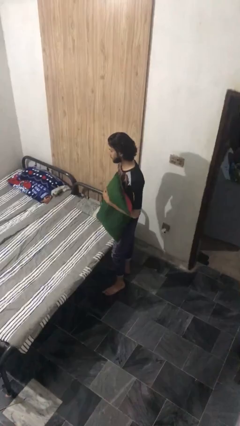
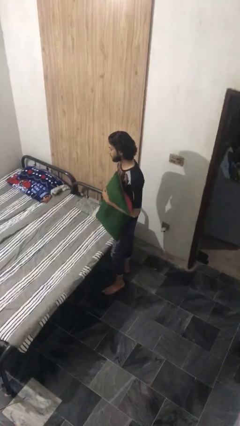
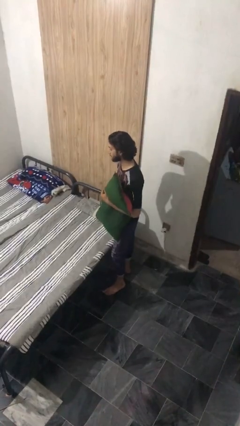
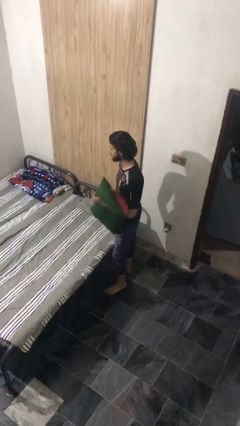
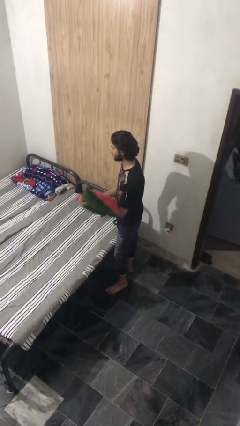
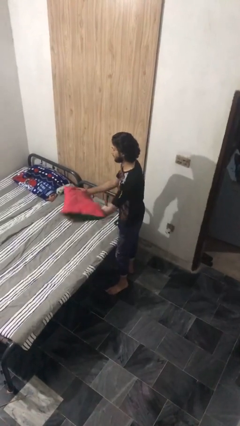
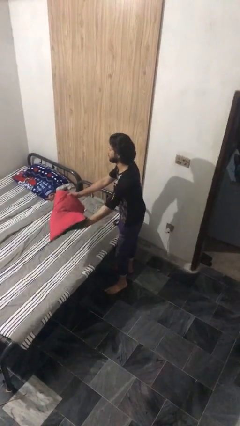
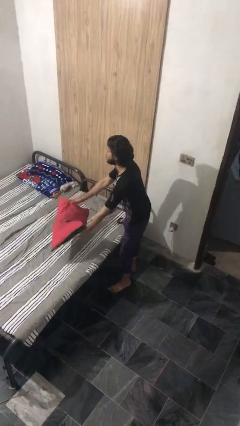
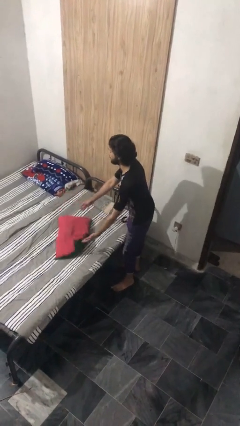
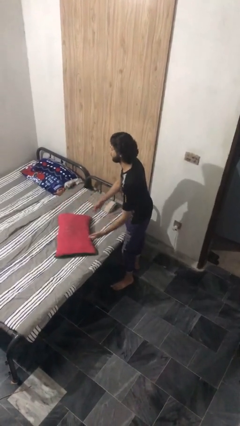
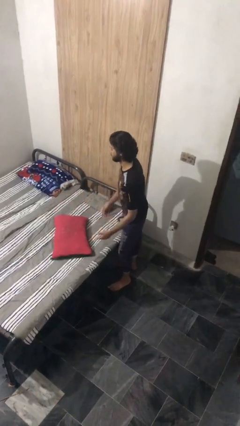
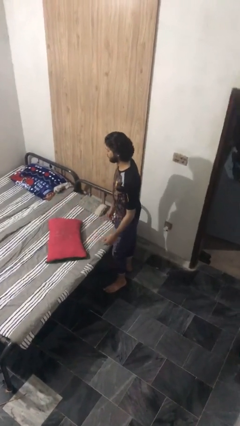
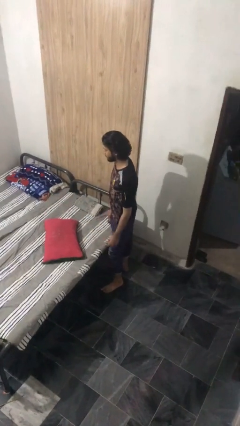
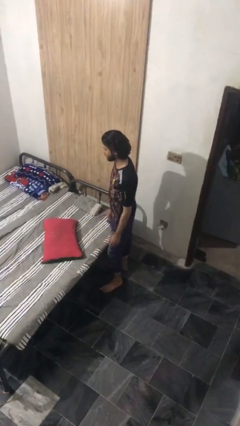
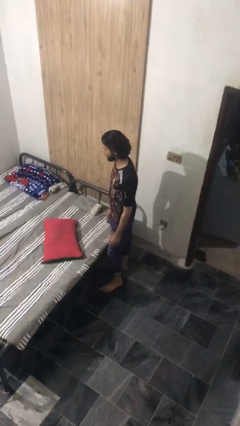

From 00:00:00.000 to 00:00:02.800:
person puts down object on bed

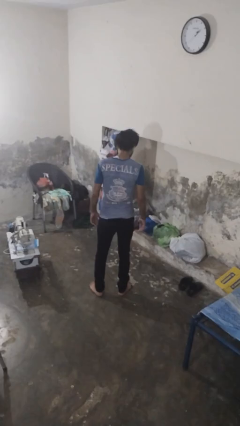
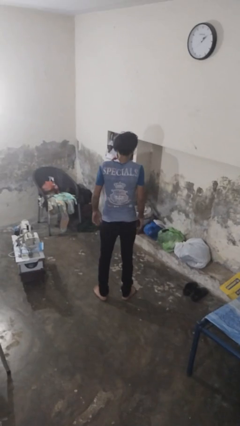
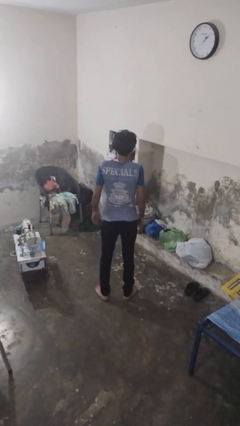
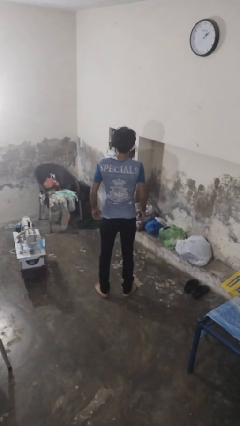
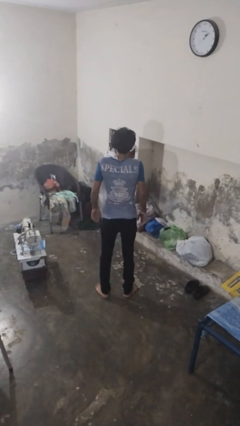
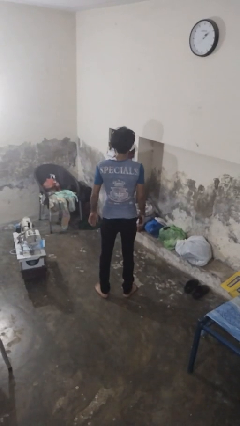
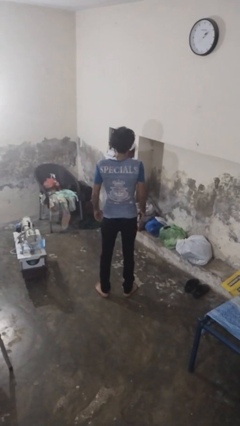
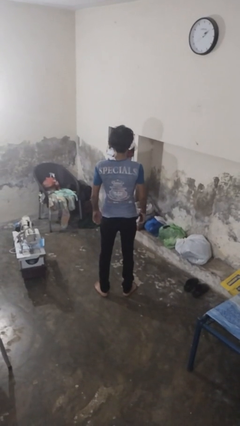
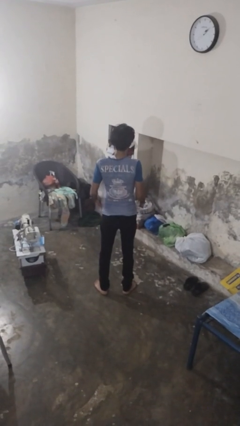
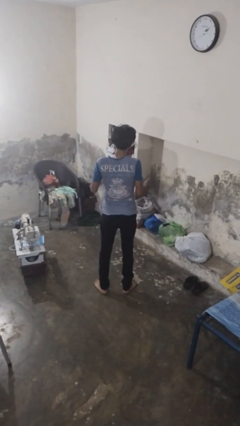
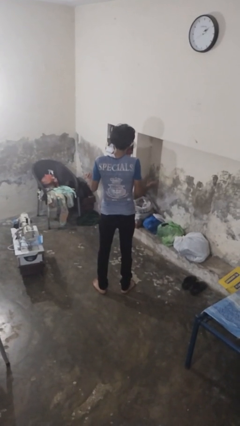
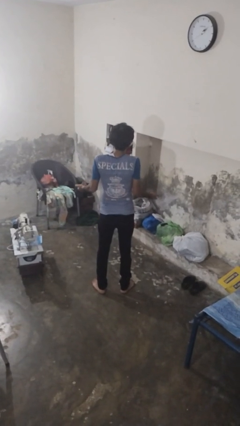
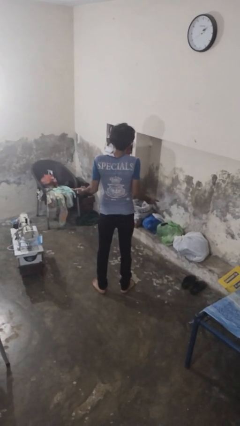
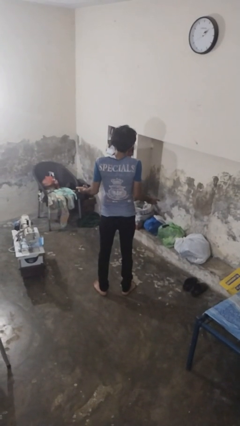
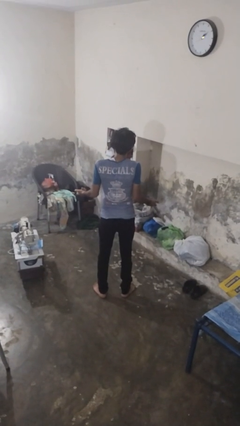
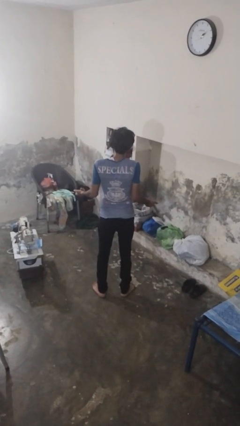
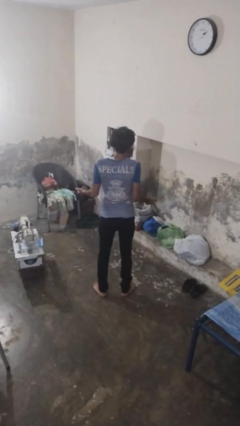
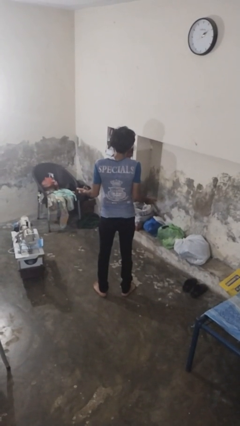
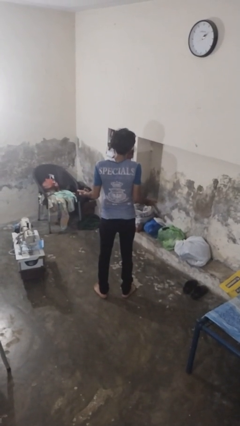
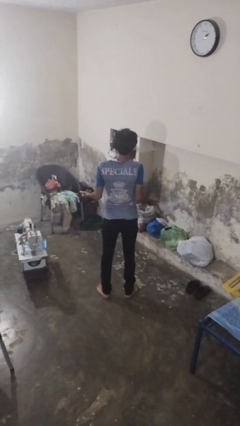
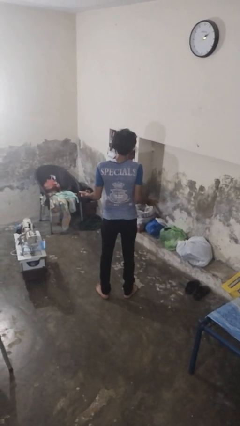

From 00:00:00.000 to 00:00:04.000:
person shrugs

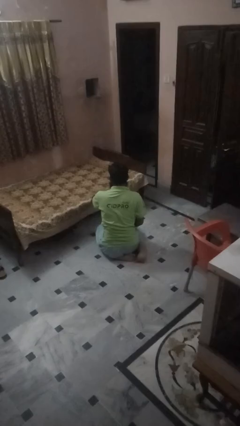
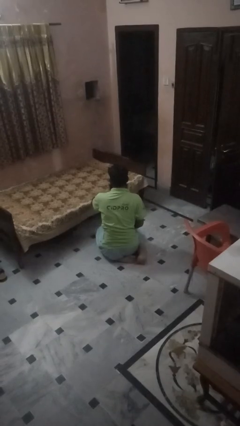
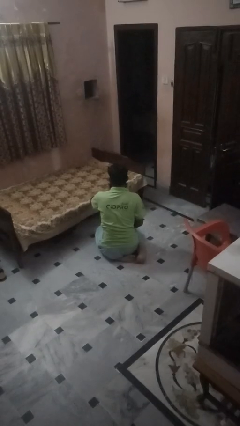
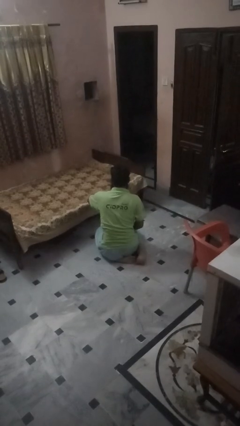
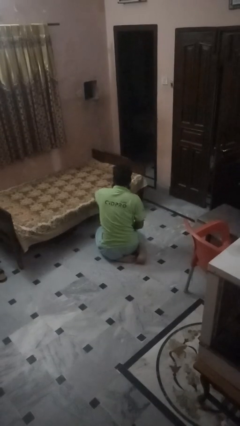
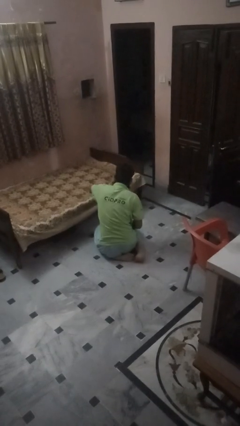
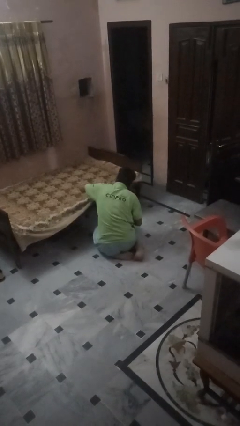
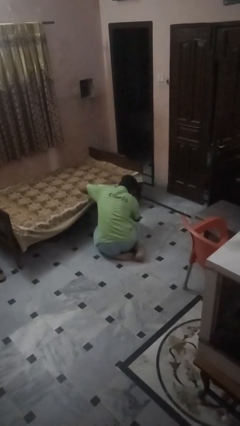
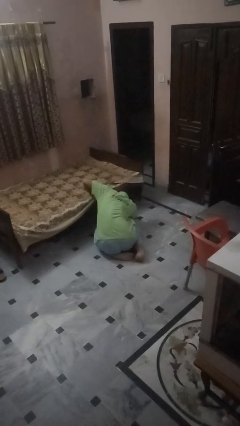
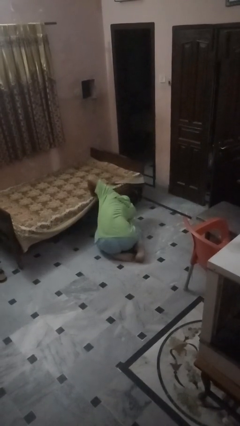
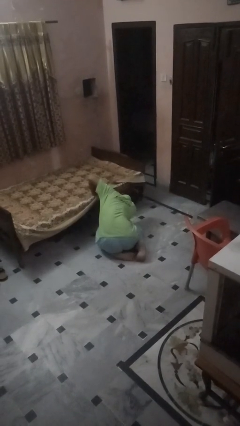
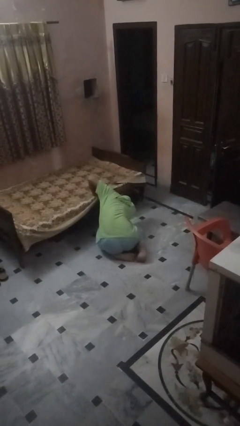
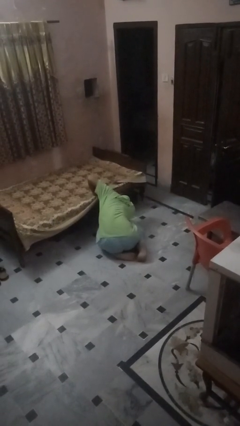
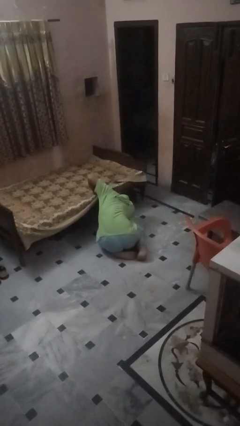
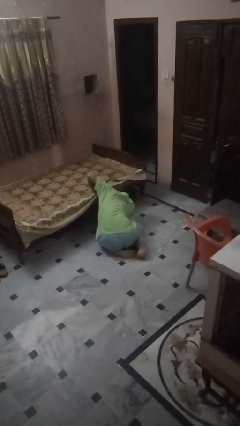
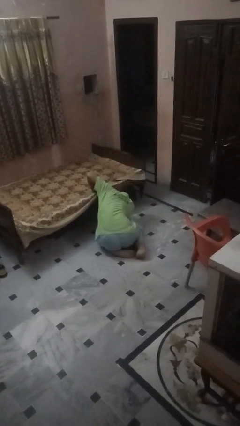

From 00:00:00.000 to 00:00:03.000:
person searches under bed

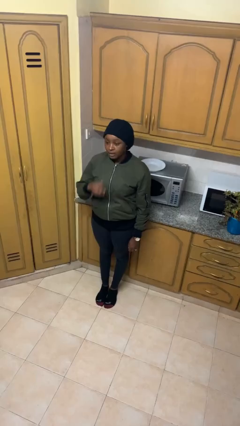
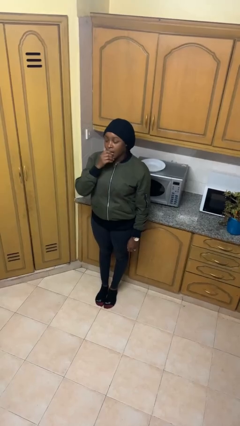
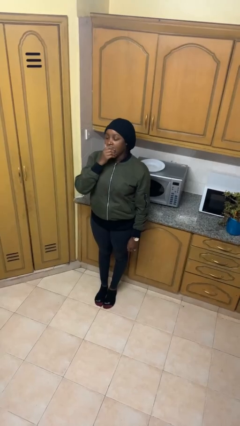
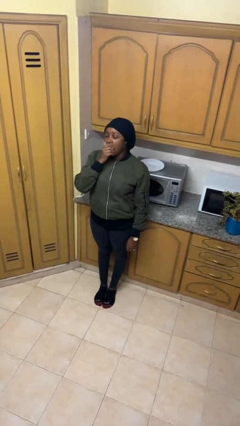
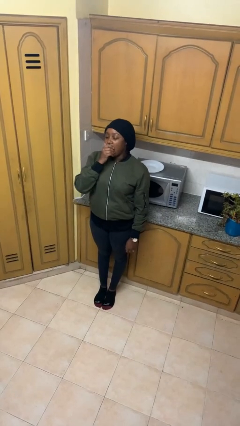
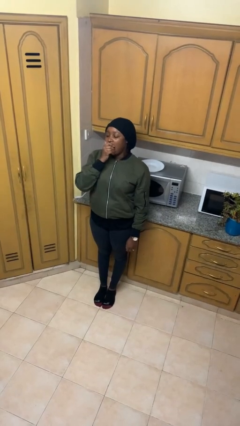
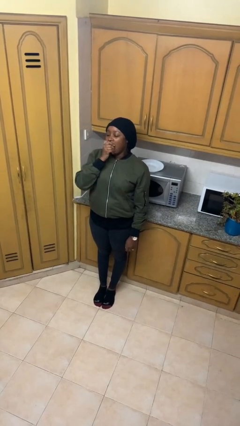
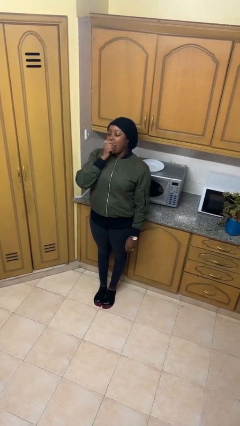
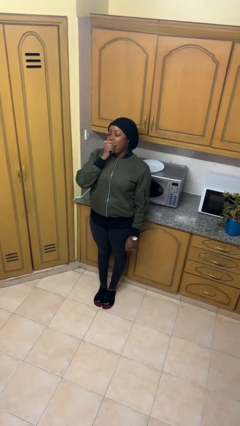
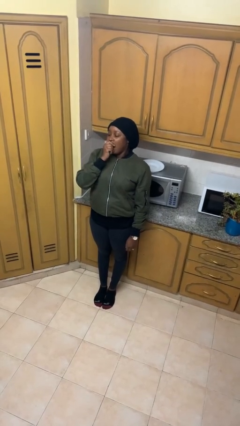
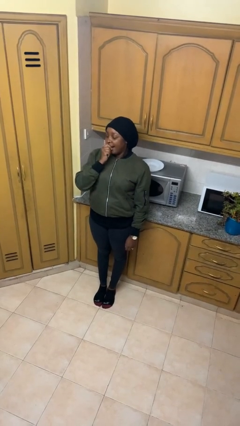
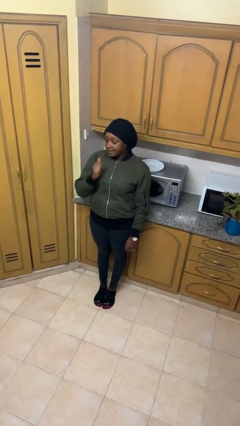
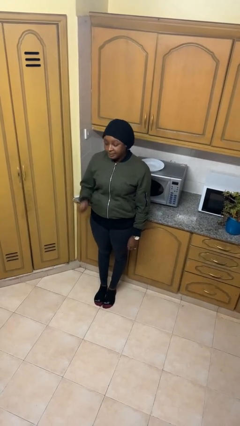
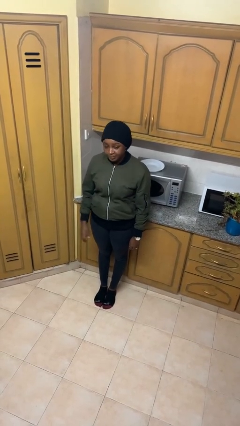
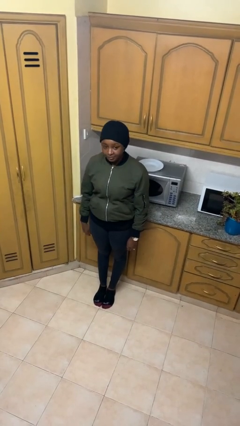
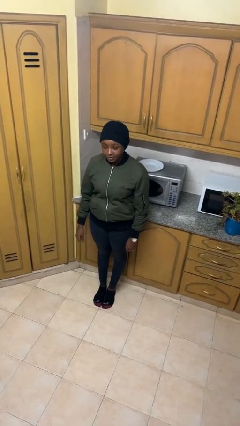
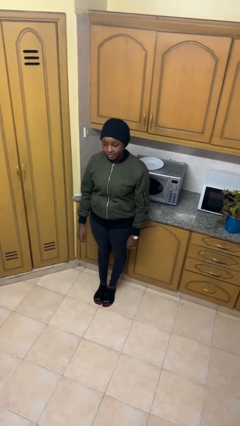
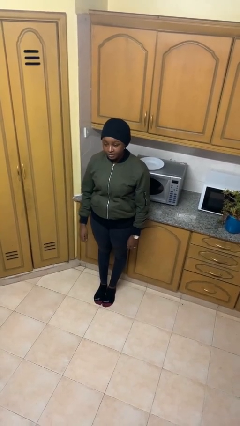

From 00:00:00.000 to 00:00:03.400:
person yawns

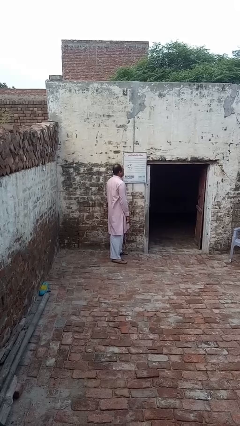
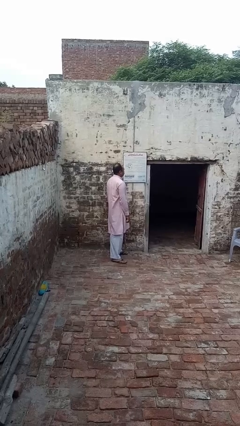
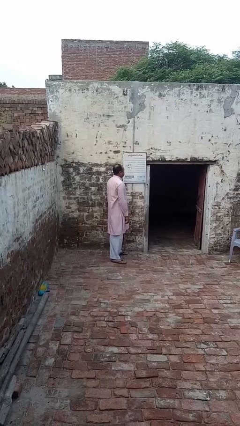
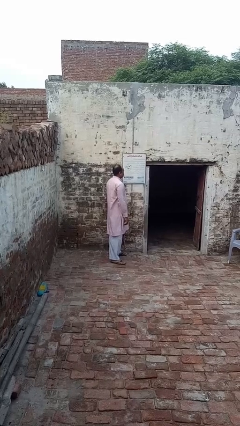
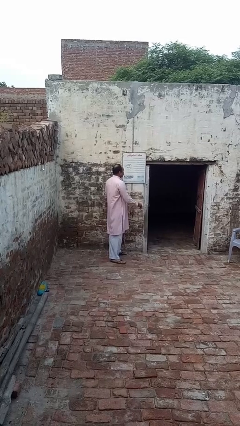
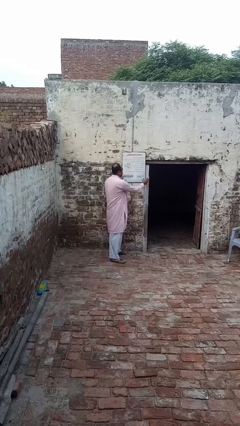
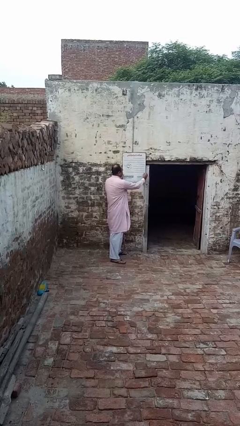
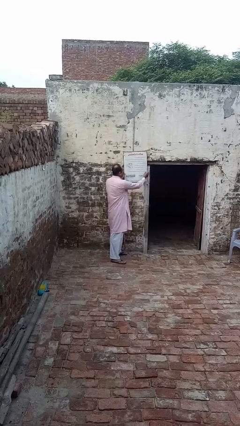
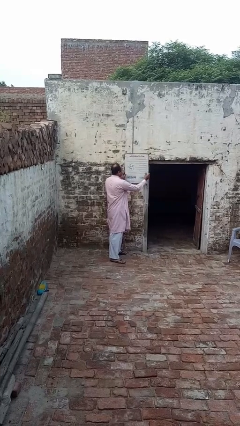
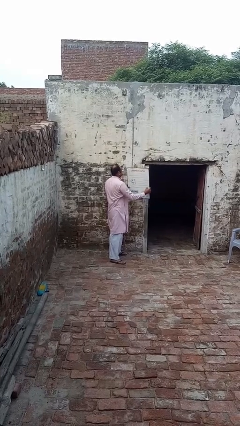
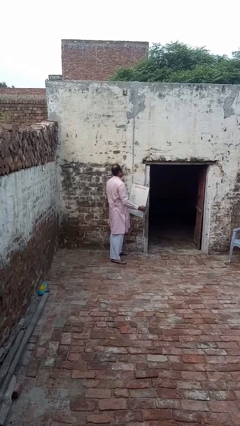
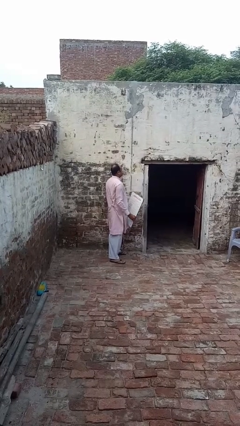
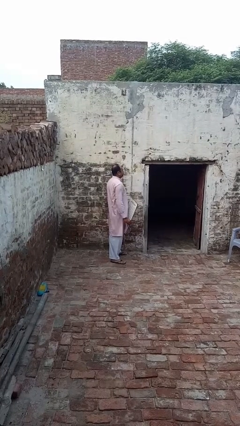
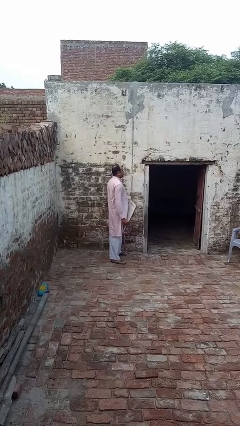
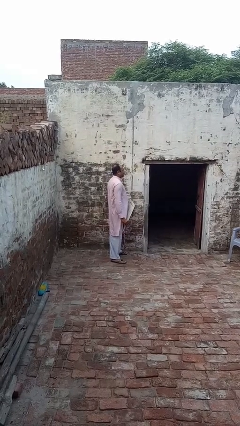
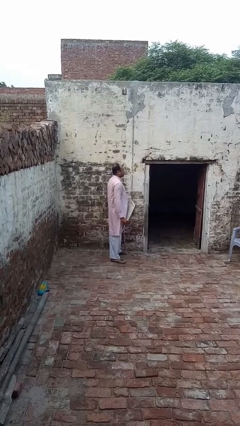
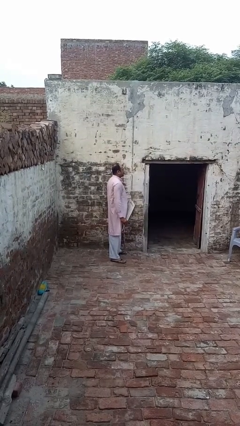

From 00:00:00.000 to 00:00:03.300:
person takes down picture frame

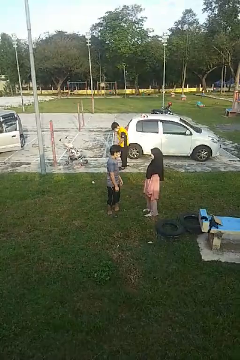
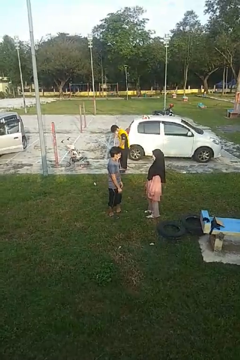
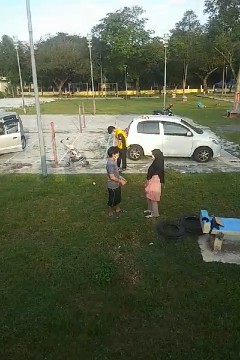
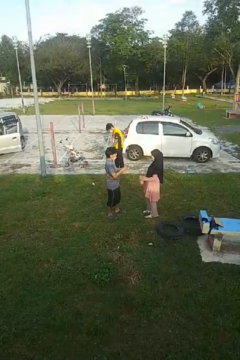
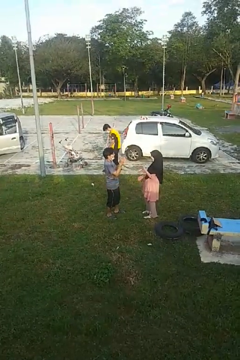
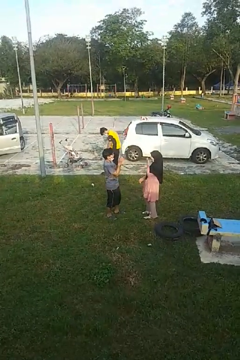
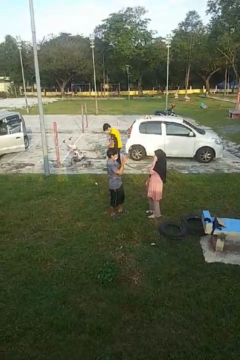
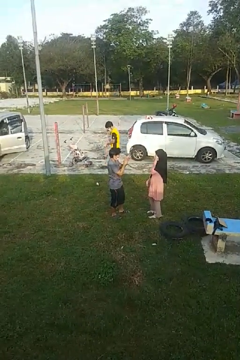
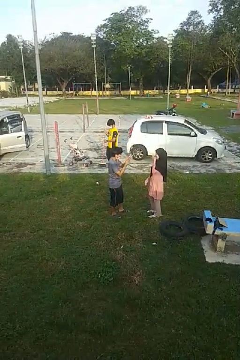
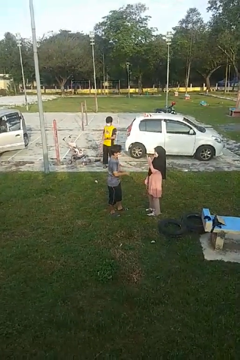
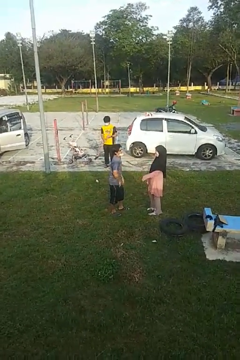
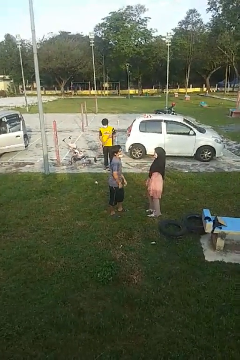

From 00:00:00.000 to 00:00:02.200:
person laughs with person
